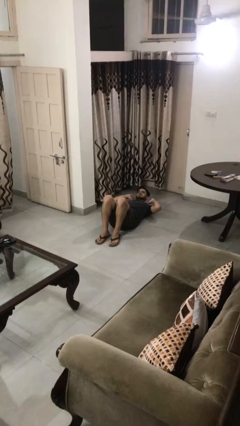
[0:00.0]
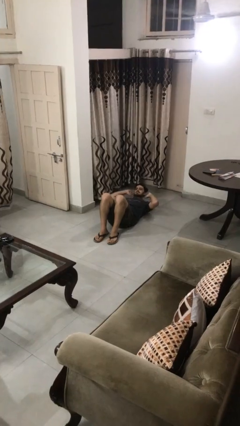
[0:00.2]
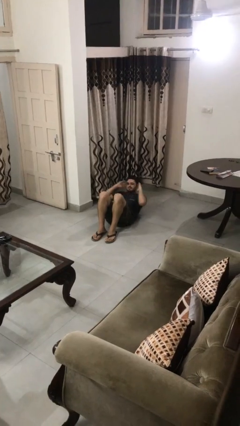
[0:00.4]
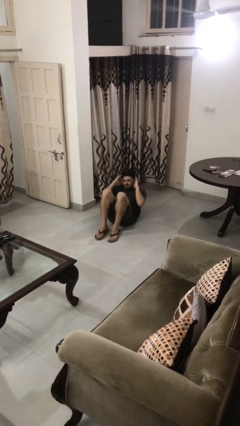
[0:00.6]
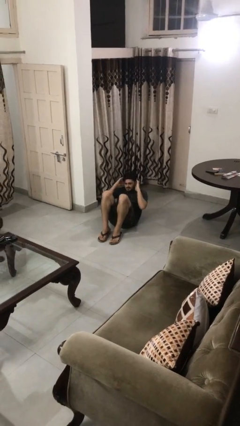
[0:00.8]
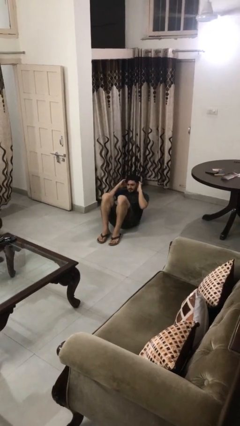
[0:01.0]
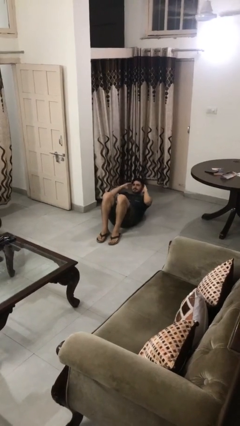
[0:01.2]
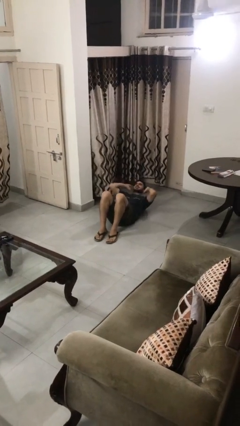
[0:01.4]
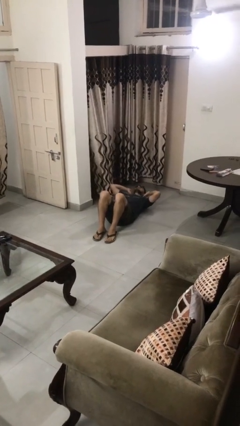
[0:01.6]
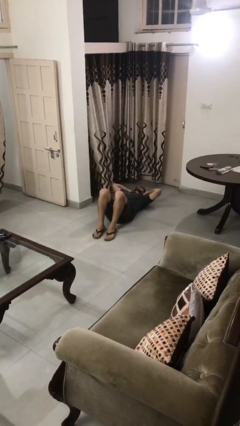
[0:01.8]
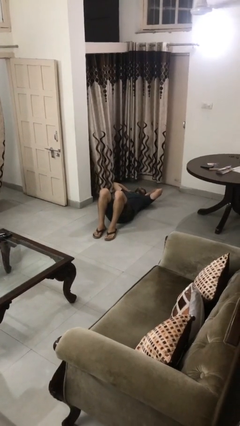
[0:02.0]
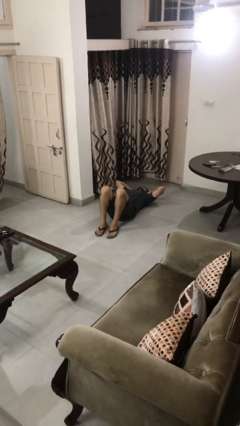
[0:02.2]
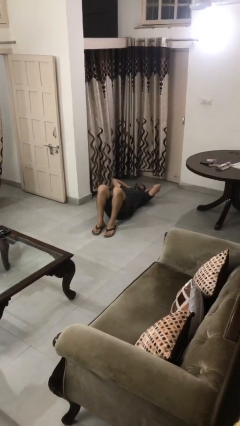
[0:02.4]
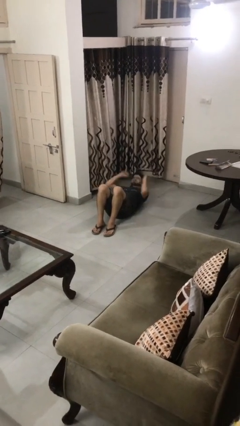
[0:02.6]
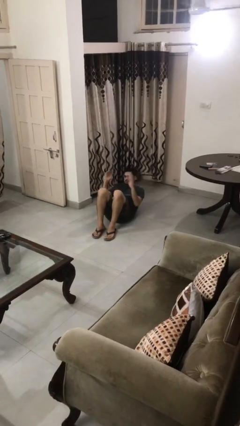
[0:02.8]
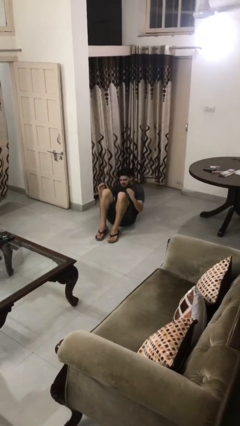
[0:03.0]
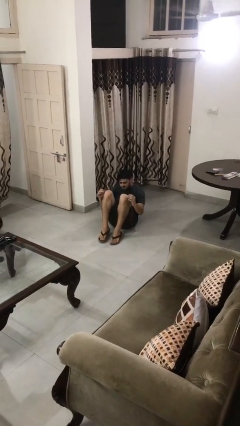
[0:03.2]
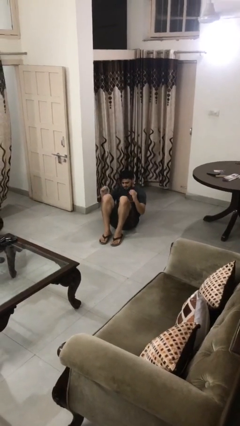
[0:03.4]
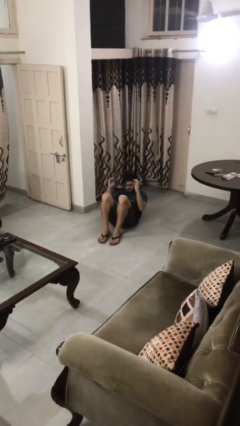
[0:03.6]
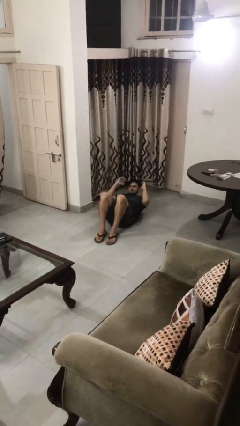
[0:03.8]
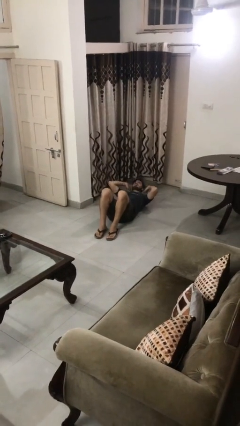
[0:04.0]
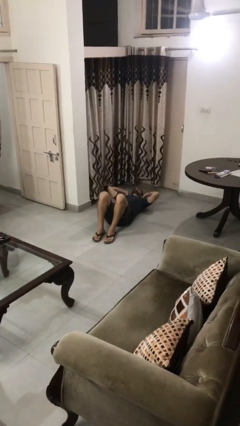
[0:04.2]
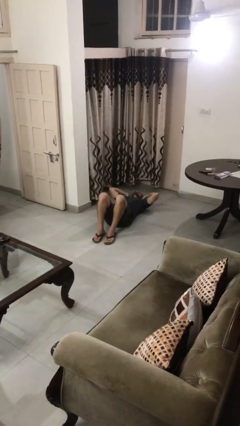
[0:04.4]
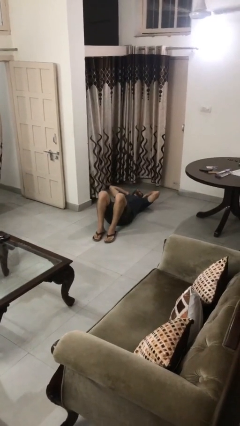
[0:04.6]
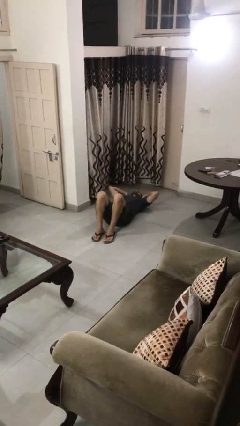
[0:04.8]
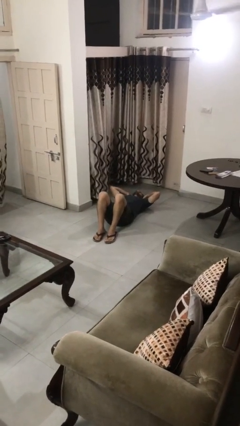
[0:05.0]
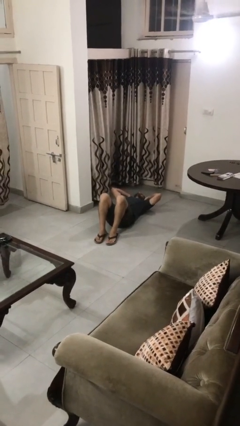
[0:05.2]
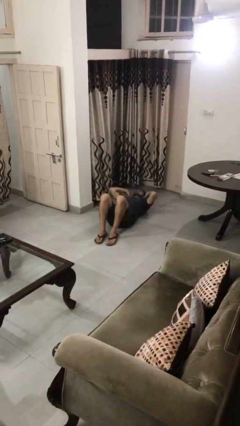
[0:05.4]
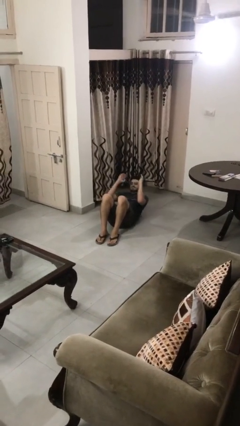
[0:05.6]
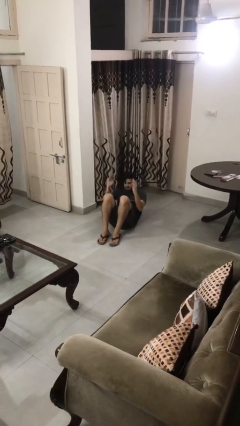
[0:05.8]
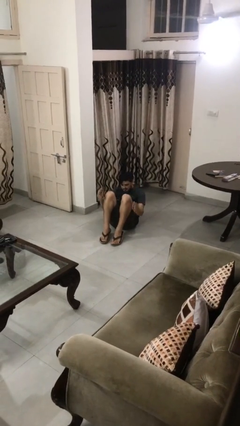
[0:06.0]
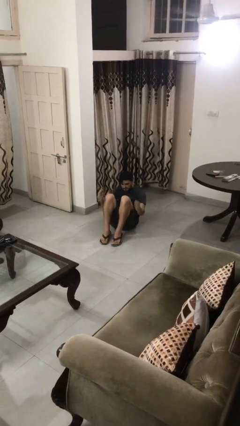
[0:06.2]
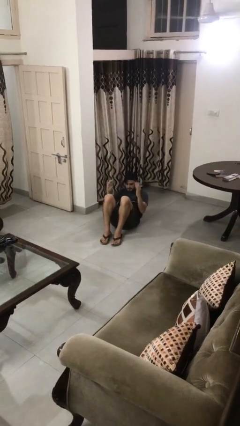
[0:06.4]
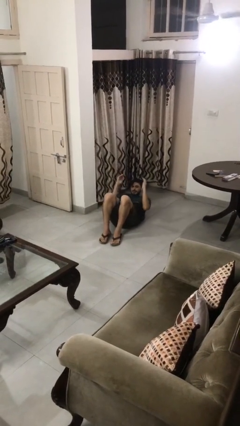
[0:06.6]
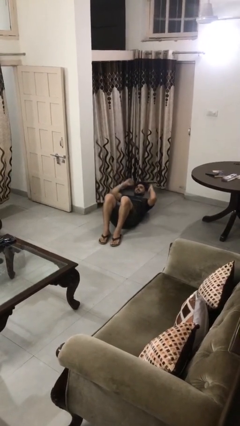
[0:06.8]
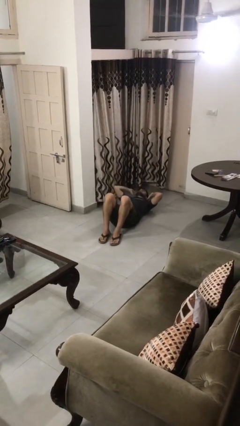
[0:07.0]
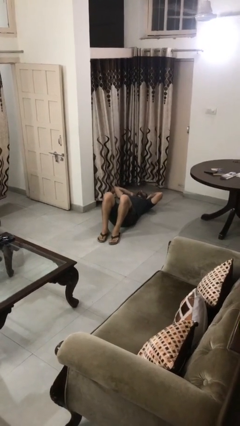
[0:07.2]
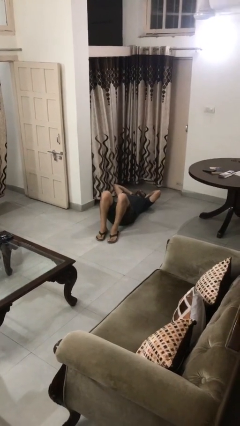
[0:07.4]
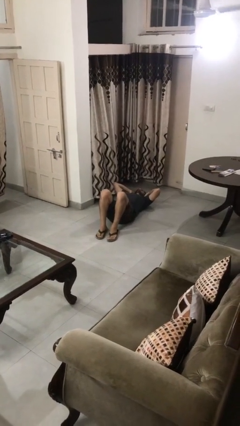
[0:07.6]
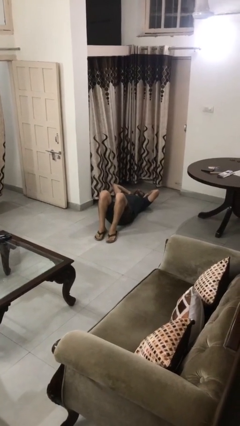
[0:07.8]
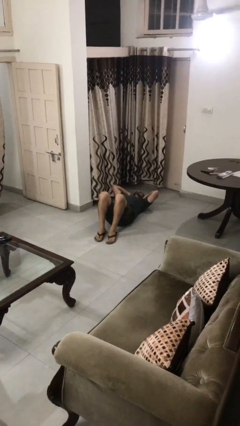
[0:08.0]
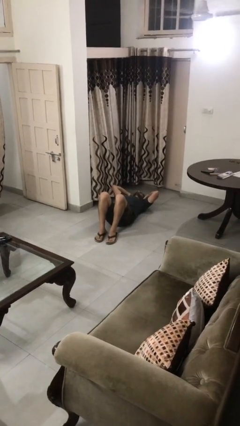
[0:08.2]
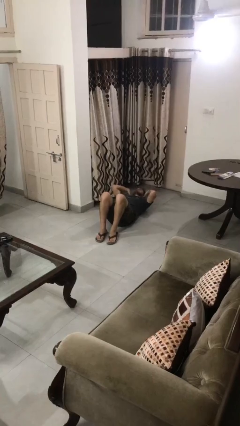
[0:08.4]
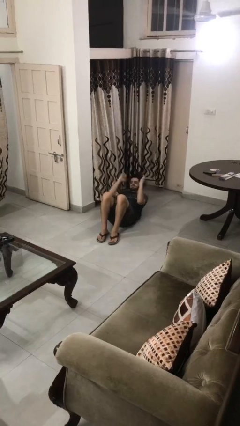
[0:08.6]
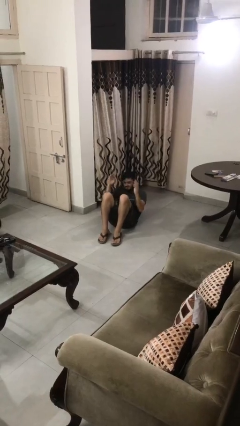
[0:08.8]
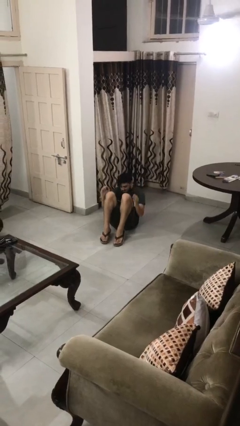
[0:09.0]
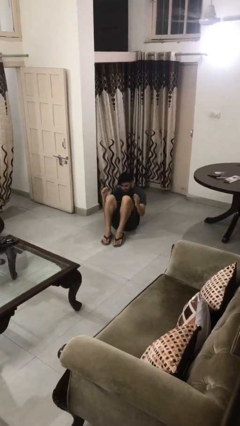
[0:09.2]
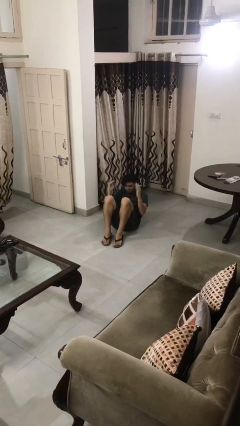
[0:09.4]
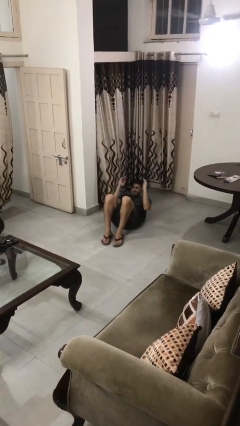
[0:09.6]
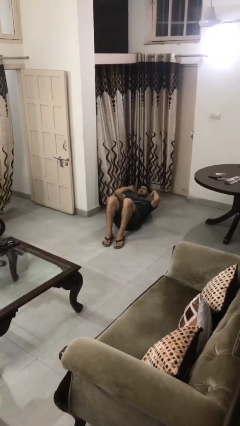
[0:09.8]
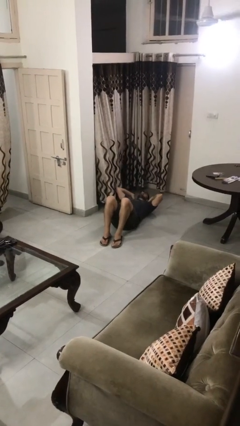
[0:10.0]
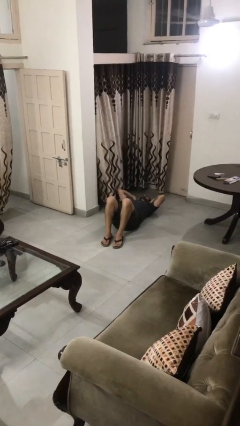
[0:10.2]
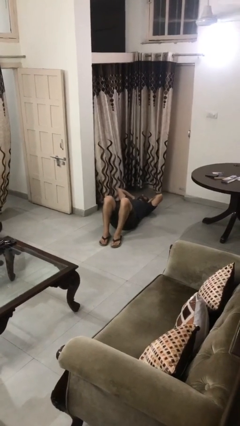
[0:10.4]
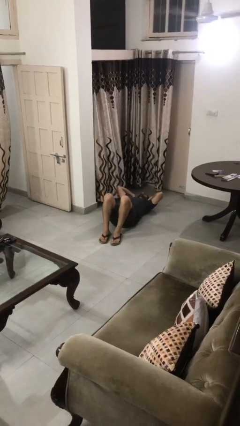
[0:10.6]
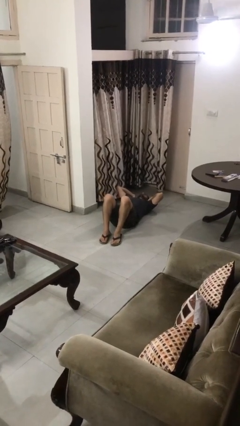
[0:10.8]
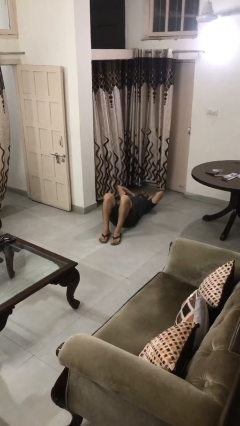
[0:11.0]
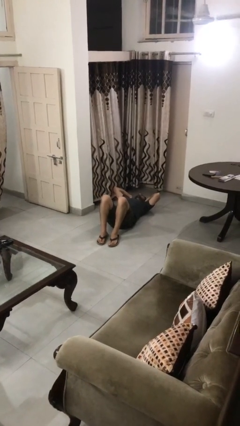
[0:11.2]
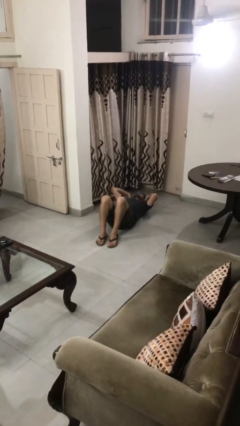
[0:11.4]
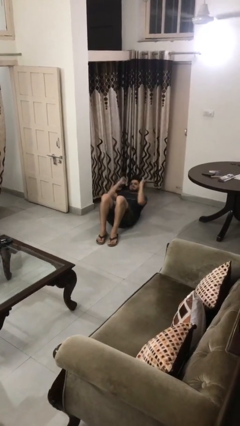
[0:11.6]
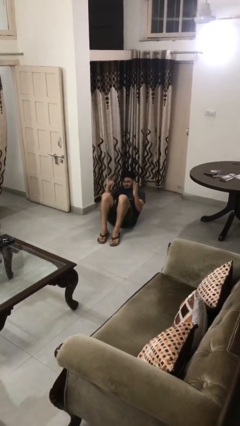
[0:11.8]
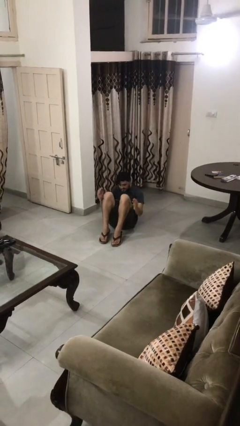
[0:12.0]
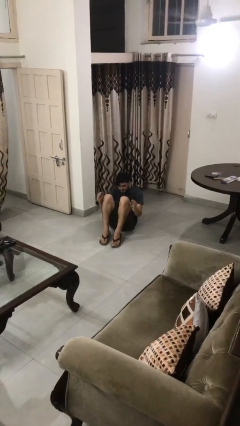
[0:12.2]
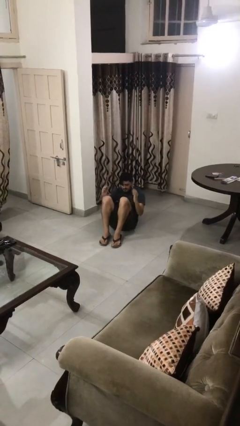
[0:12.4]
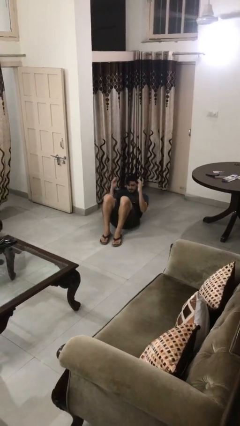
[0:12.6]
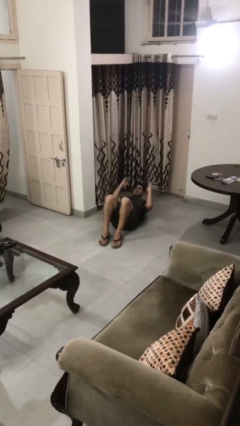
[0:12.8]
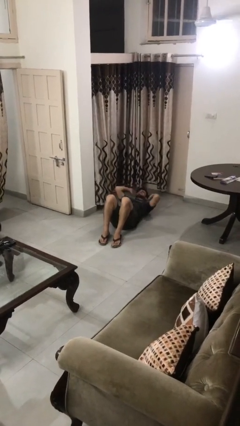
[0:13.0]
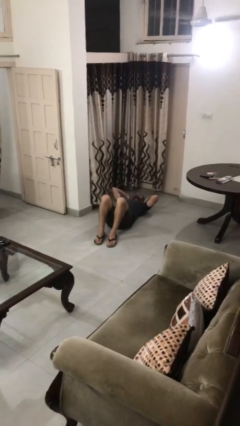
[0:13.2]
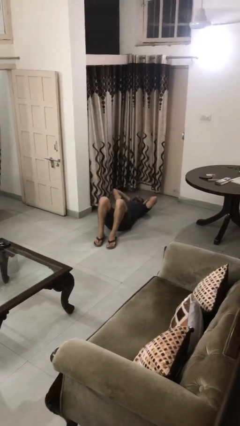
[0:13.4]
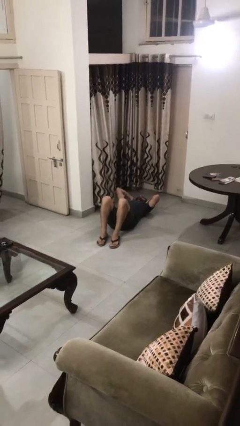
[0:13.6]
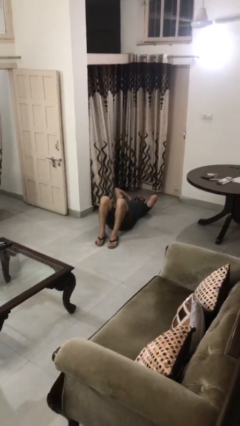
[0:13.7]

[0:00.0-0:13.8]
person exercises with situp

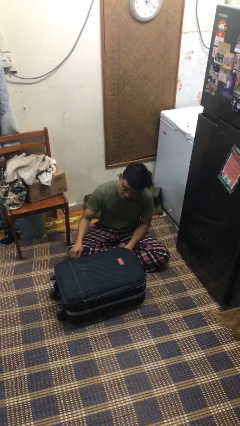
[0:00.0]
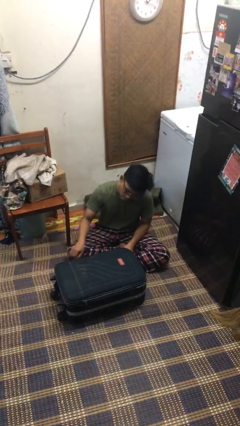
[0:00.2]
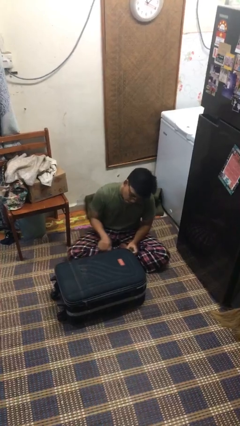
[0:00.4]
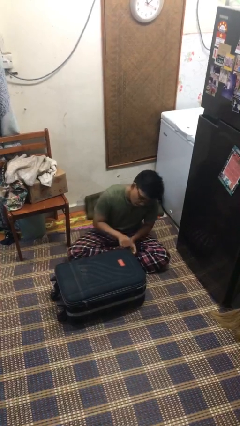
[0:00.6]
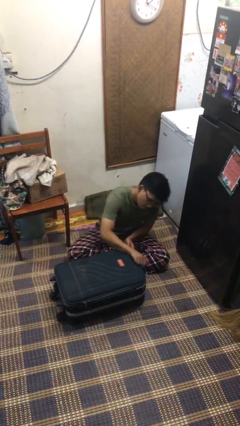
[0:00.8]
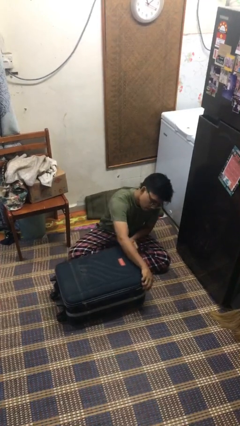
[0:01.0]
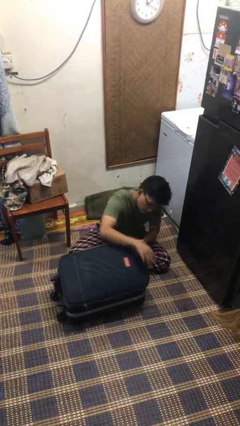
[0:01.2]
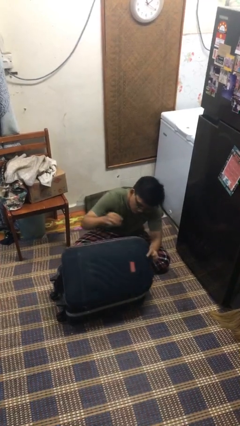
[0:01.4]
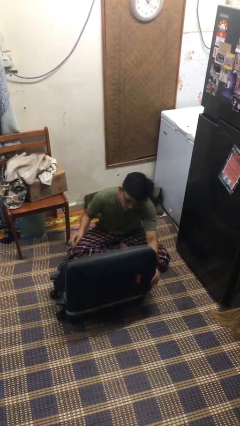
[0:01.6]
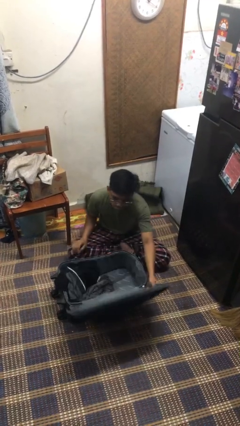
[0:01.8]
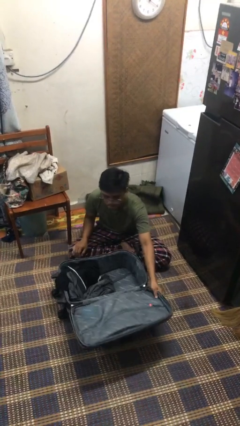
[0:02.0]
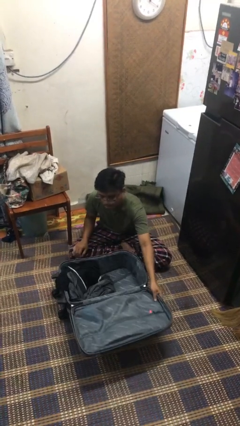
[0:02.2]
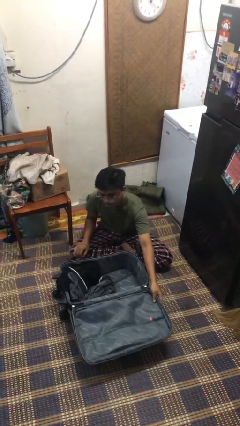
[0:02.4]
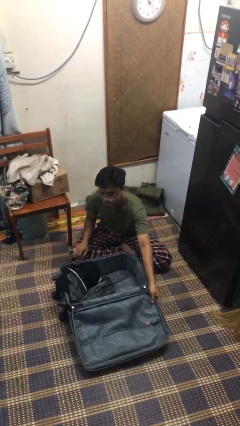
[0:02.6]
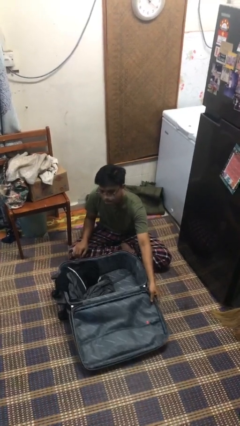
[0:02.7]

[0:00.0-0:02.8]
person opens suitcase

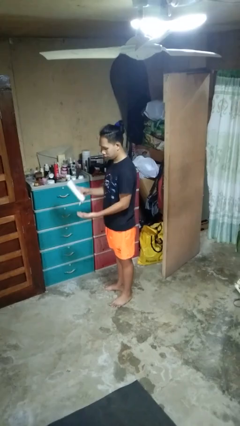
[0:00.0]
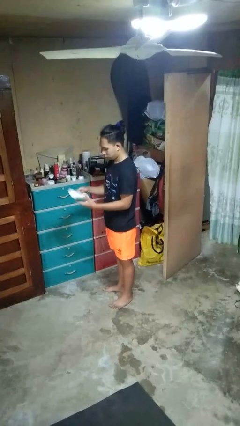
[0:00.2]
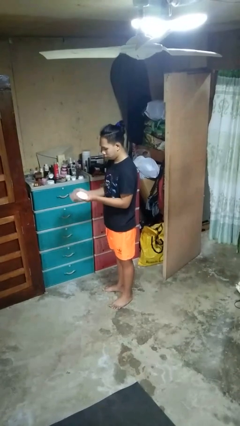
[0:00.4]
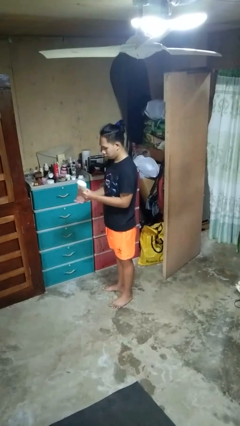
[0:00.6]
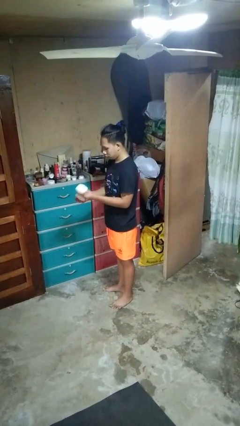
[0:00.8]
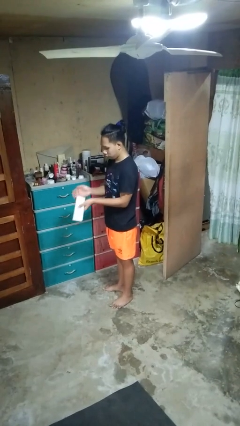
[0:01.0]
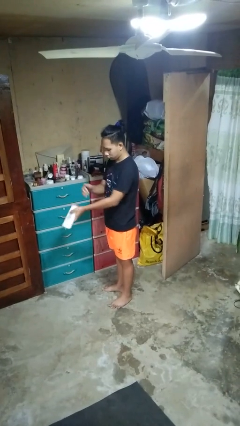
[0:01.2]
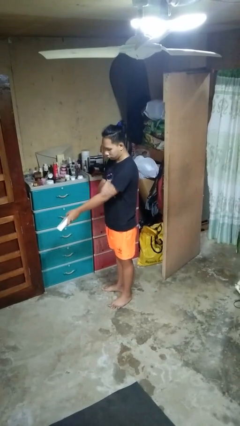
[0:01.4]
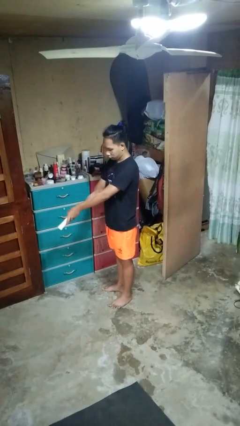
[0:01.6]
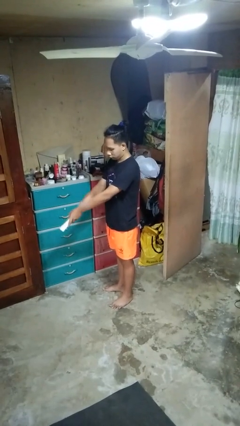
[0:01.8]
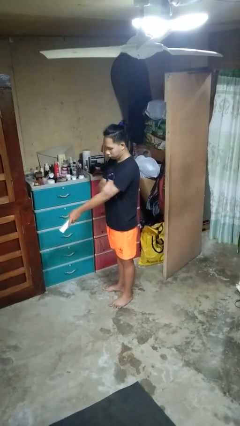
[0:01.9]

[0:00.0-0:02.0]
person applies sunscreen
